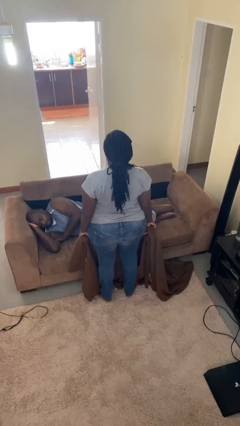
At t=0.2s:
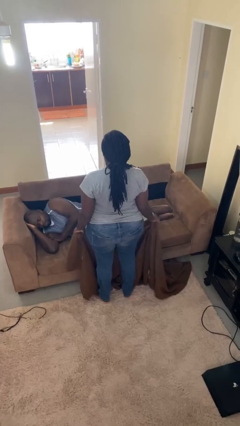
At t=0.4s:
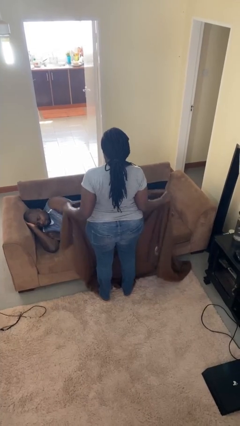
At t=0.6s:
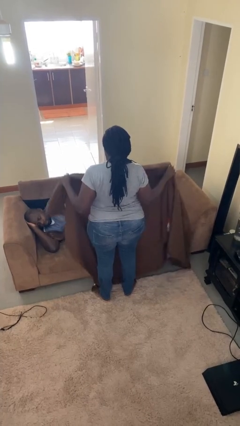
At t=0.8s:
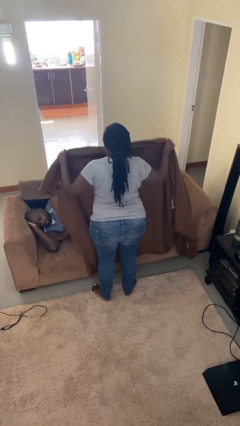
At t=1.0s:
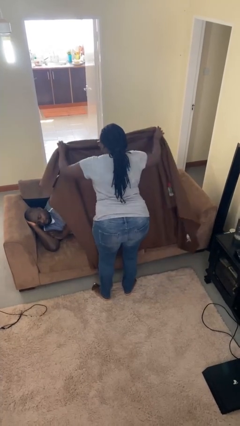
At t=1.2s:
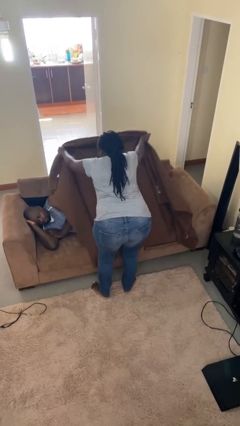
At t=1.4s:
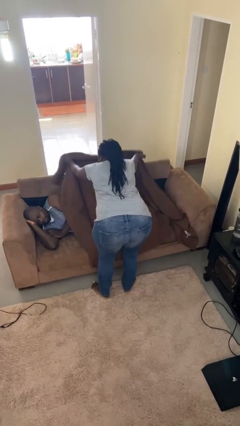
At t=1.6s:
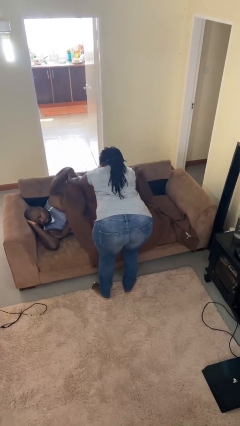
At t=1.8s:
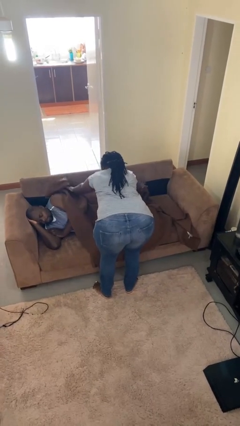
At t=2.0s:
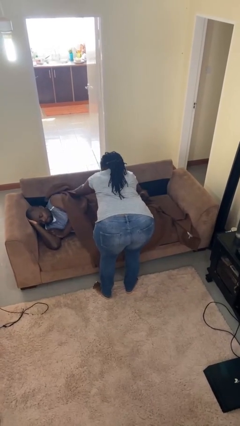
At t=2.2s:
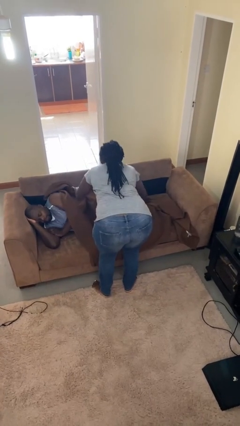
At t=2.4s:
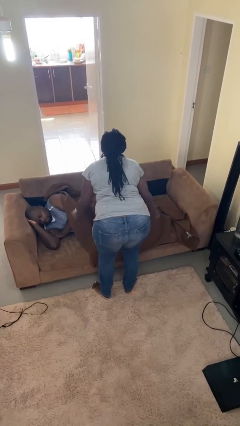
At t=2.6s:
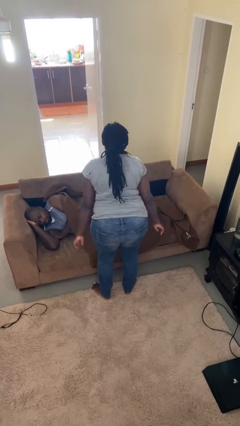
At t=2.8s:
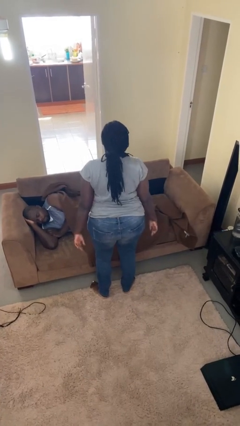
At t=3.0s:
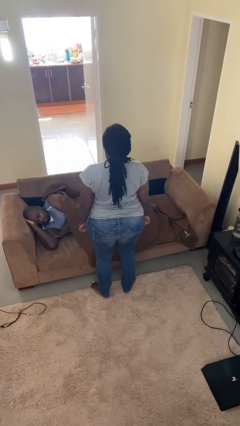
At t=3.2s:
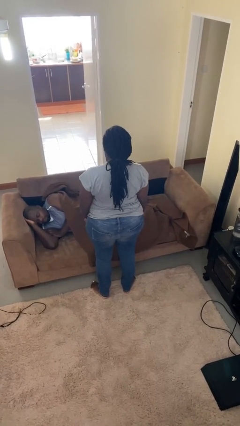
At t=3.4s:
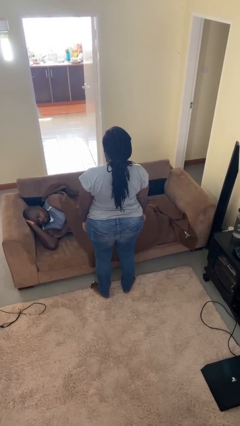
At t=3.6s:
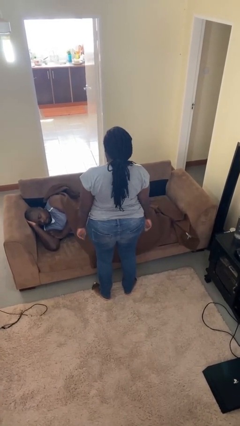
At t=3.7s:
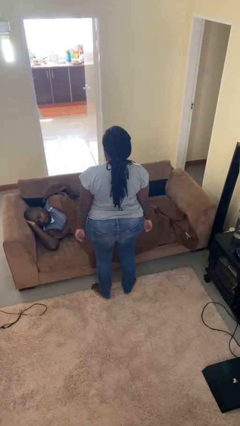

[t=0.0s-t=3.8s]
person covers friend with blanket

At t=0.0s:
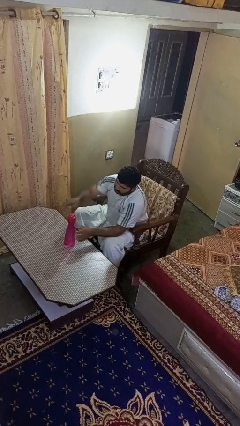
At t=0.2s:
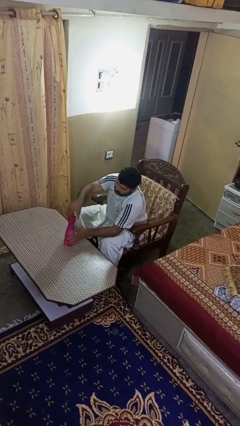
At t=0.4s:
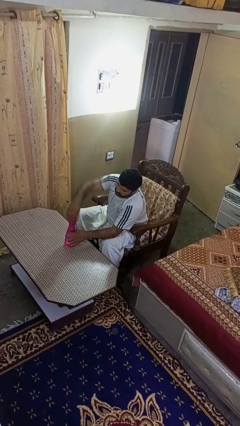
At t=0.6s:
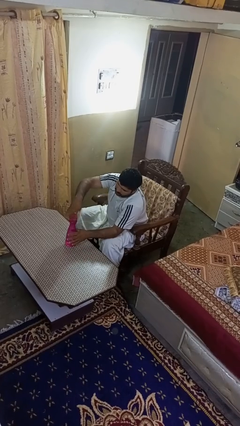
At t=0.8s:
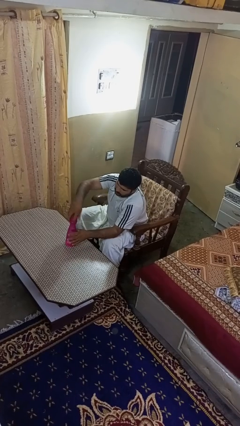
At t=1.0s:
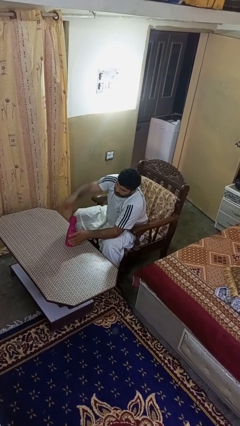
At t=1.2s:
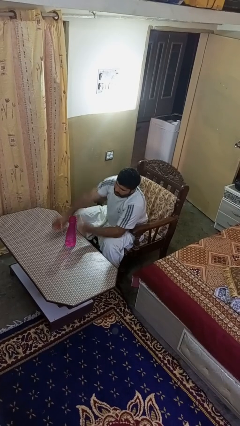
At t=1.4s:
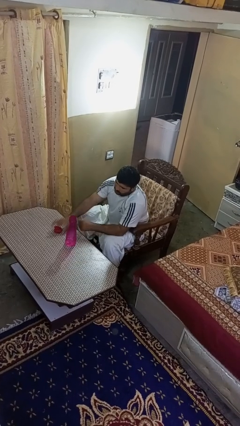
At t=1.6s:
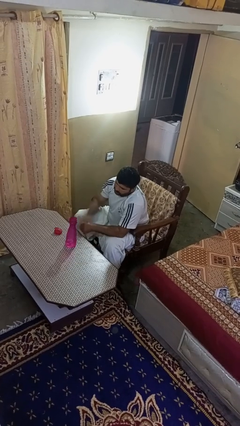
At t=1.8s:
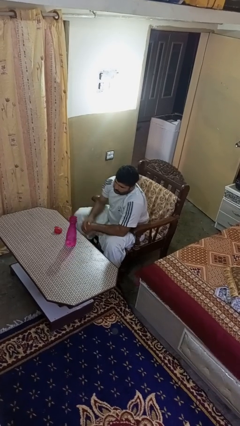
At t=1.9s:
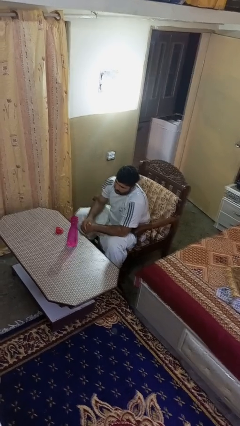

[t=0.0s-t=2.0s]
person unscrews lid from bottle

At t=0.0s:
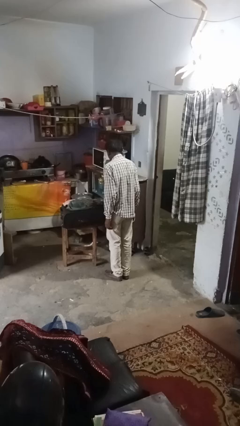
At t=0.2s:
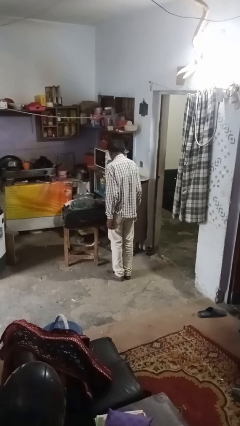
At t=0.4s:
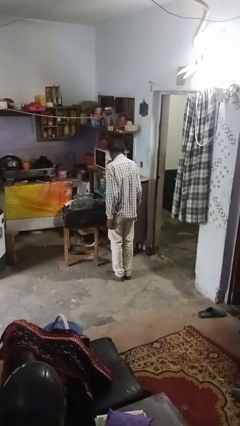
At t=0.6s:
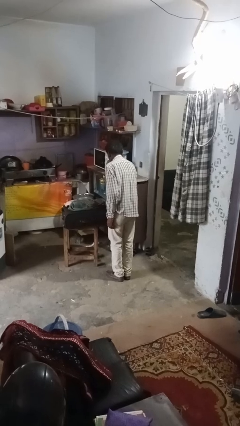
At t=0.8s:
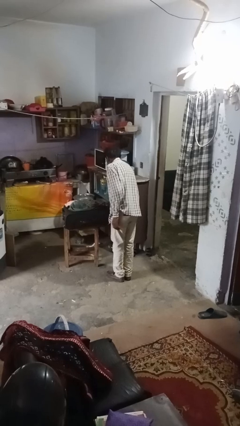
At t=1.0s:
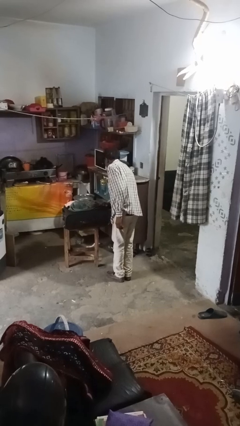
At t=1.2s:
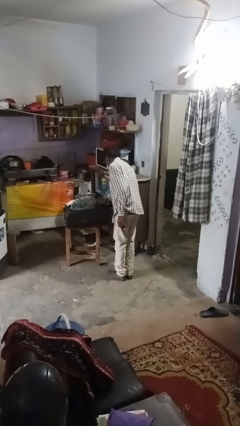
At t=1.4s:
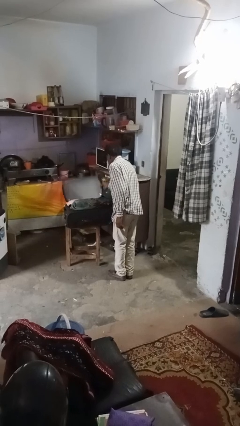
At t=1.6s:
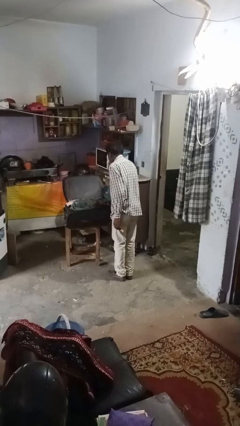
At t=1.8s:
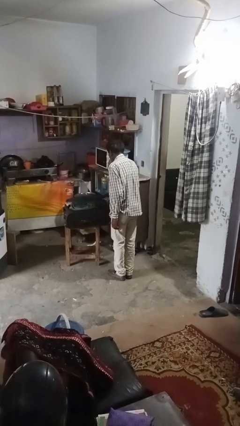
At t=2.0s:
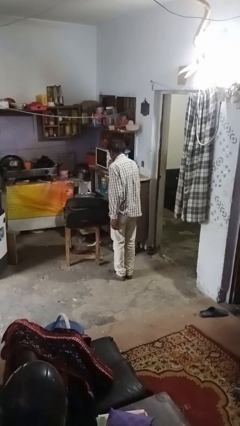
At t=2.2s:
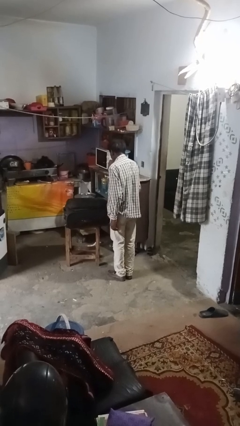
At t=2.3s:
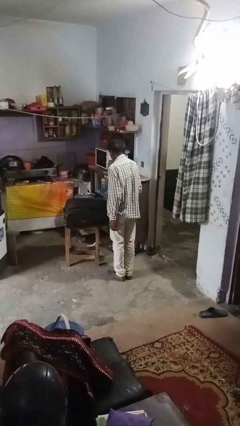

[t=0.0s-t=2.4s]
person closes suitcase

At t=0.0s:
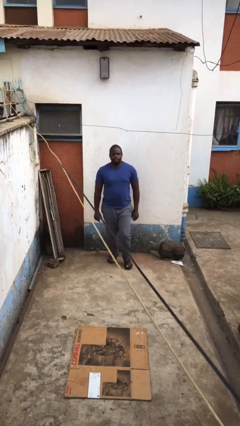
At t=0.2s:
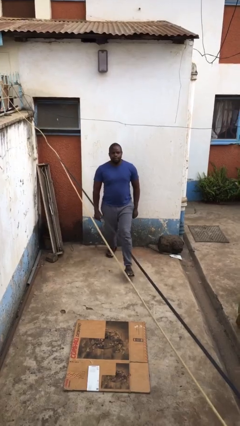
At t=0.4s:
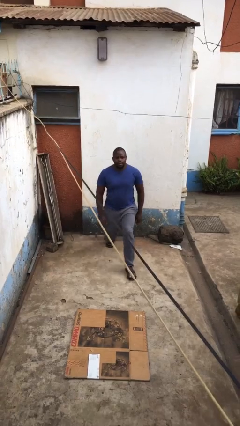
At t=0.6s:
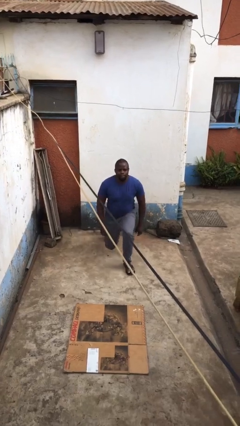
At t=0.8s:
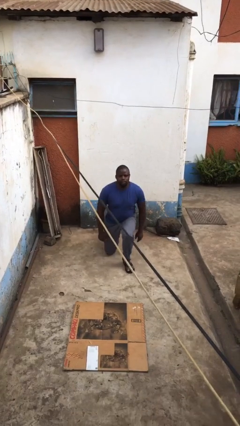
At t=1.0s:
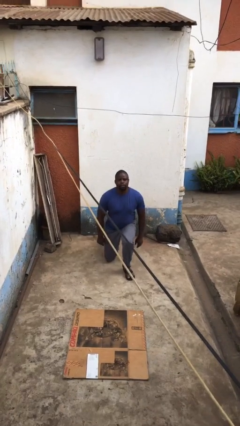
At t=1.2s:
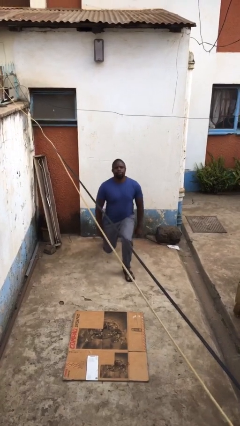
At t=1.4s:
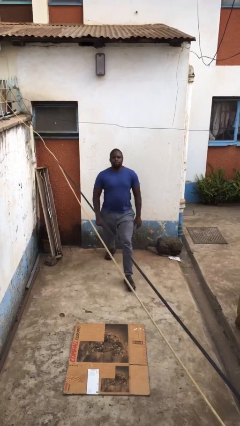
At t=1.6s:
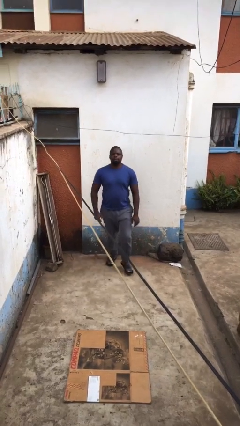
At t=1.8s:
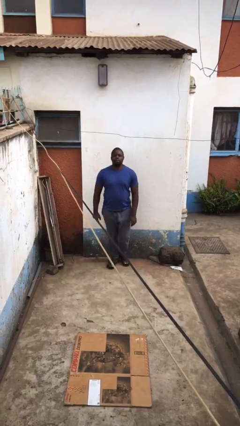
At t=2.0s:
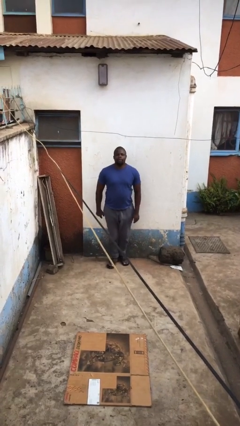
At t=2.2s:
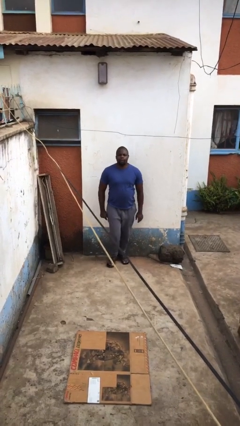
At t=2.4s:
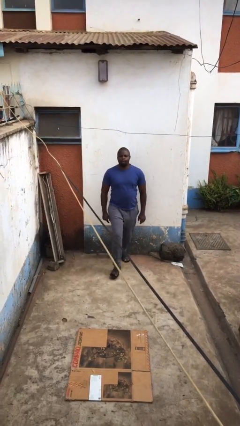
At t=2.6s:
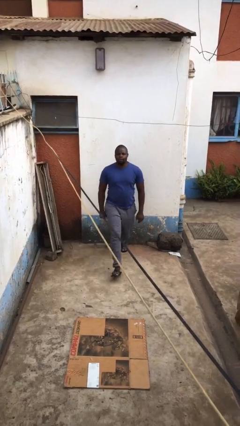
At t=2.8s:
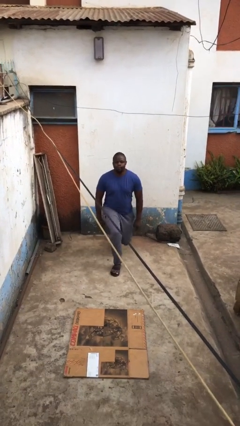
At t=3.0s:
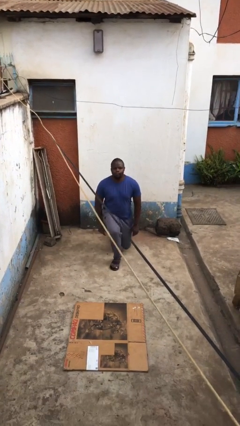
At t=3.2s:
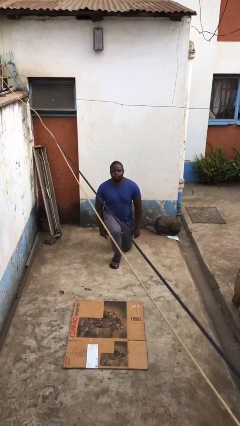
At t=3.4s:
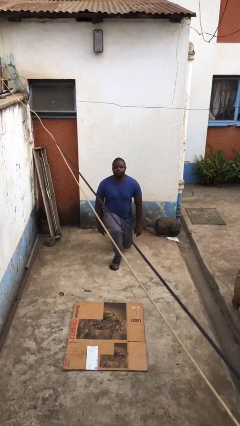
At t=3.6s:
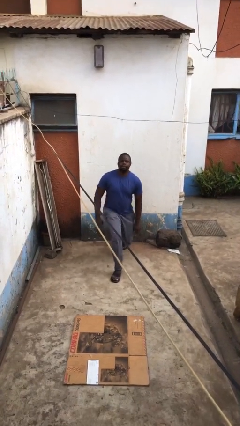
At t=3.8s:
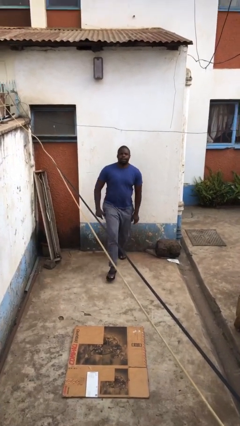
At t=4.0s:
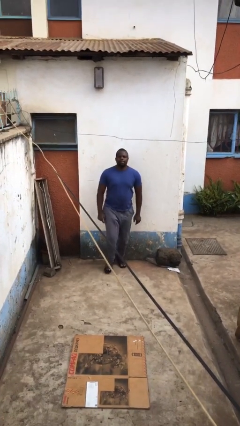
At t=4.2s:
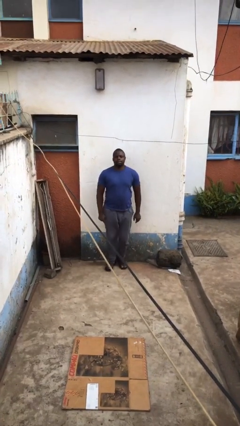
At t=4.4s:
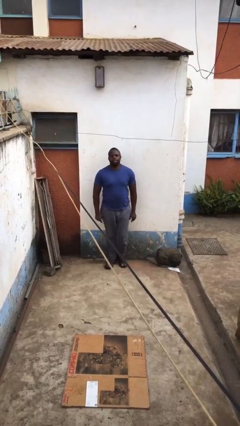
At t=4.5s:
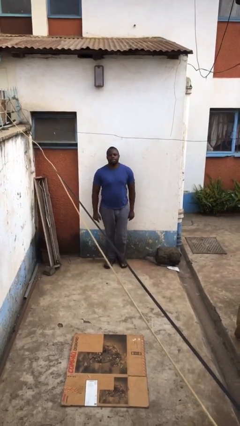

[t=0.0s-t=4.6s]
person exercises with lunges

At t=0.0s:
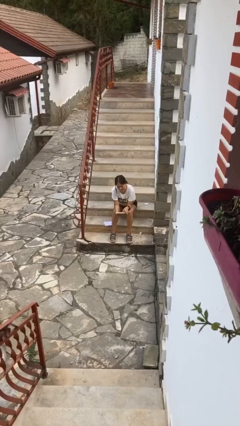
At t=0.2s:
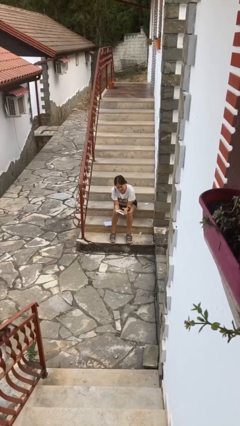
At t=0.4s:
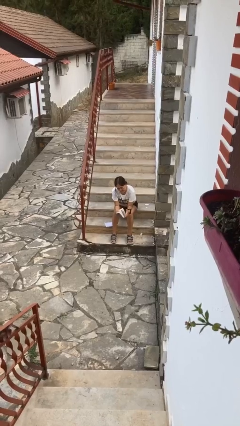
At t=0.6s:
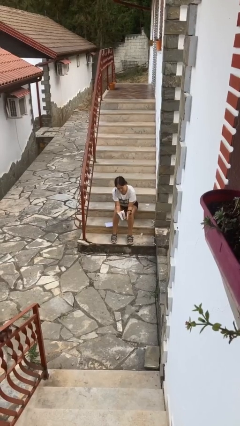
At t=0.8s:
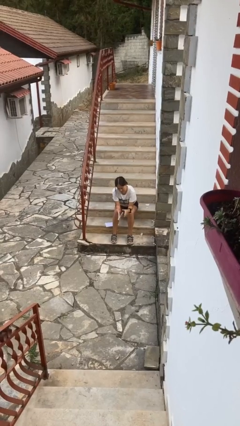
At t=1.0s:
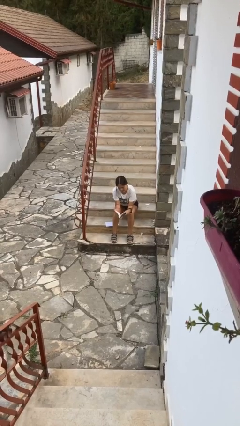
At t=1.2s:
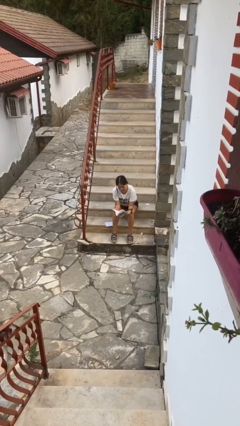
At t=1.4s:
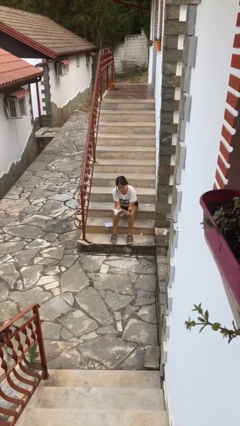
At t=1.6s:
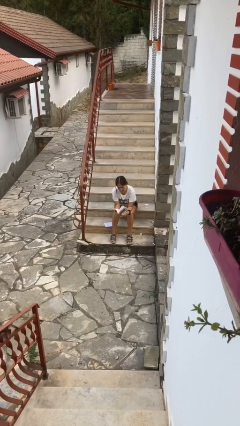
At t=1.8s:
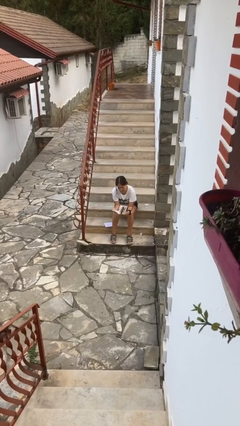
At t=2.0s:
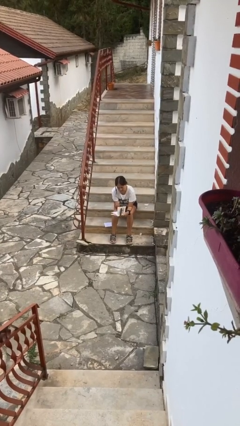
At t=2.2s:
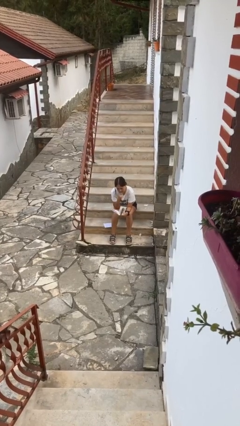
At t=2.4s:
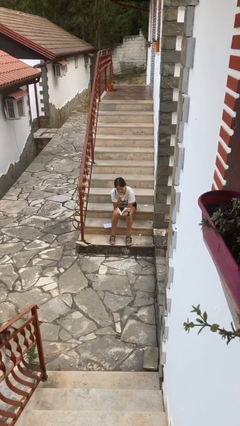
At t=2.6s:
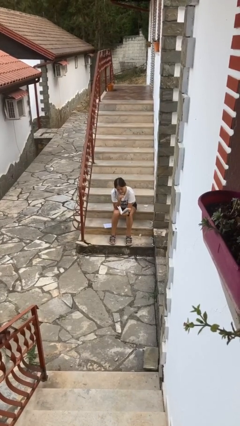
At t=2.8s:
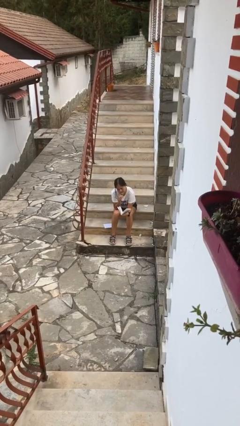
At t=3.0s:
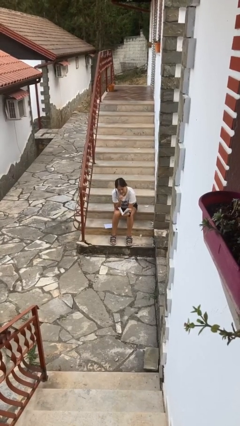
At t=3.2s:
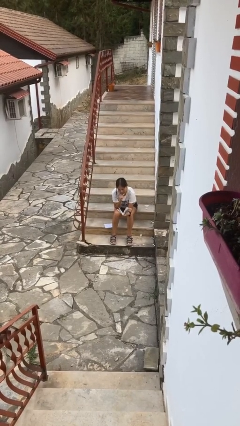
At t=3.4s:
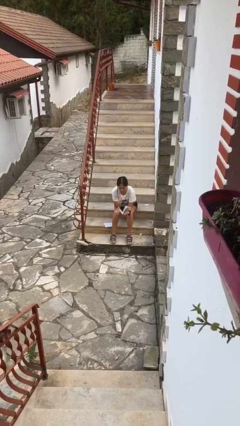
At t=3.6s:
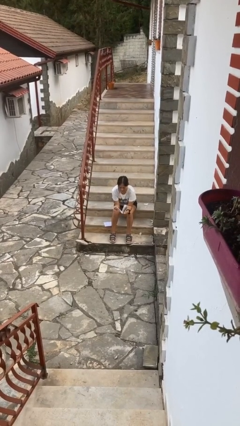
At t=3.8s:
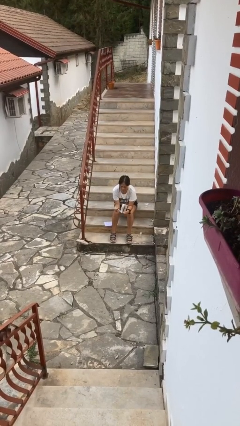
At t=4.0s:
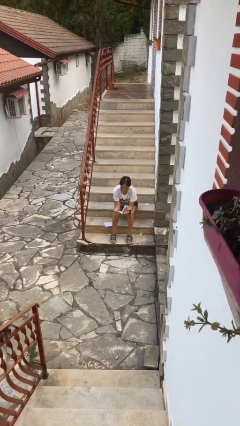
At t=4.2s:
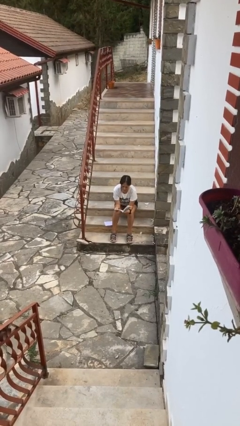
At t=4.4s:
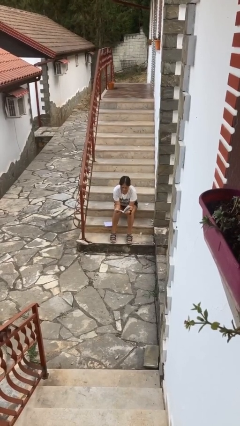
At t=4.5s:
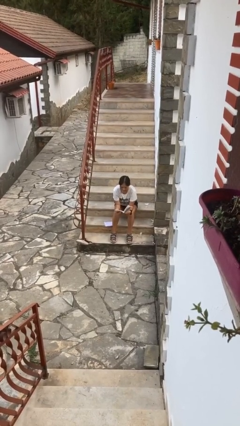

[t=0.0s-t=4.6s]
person reads book
